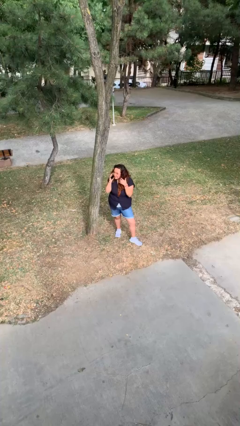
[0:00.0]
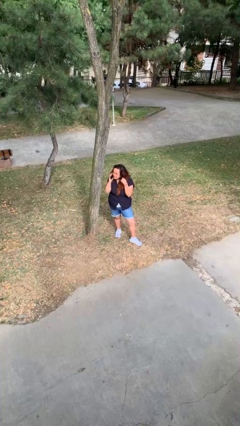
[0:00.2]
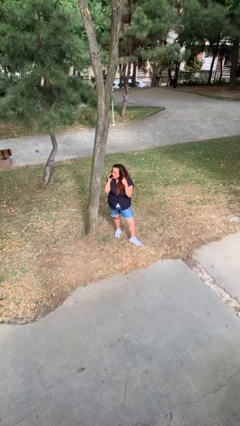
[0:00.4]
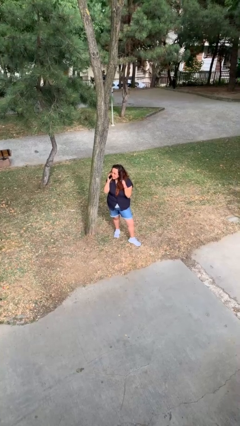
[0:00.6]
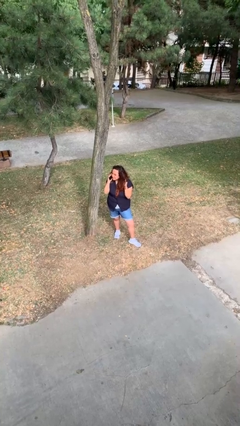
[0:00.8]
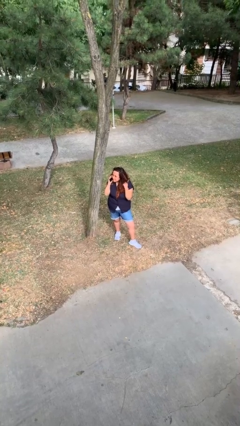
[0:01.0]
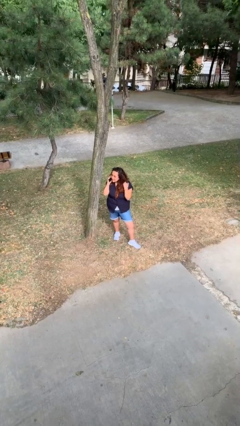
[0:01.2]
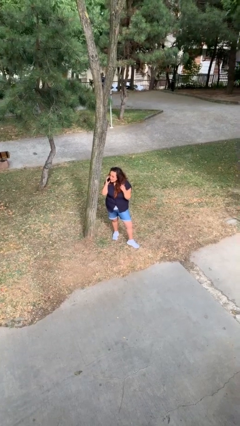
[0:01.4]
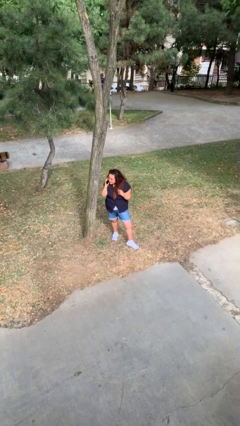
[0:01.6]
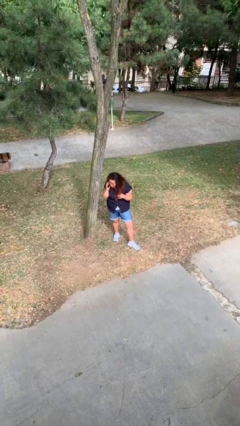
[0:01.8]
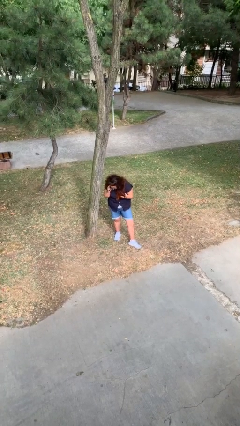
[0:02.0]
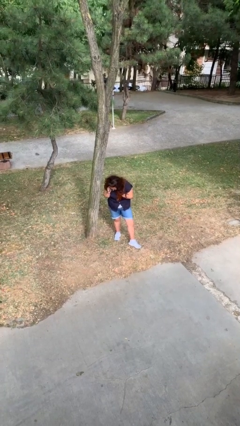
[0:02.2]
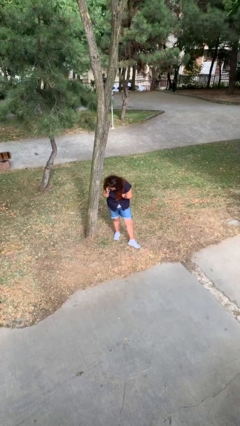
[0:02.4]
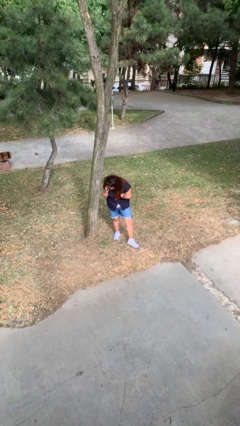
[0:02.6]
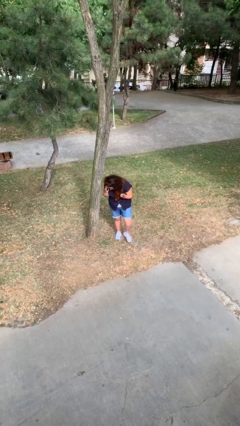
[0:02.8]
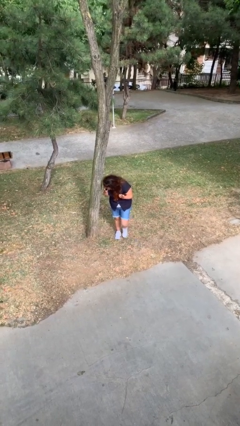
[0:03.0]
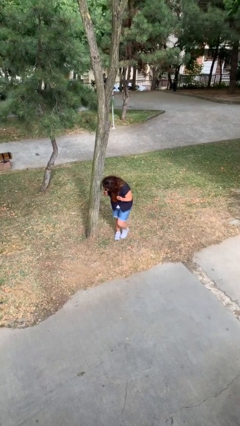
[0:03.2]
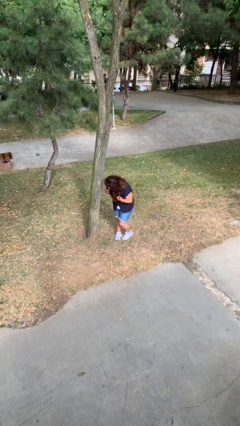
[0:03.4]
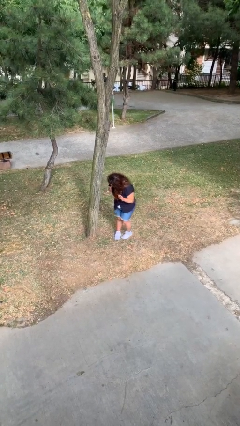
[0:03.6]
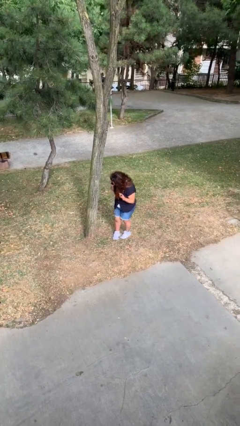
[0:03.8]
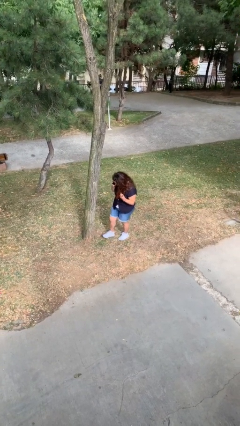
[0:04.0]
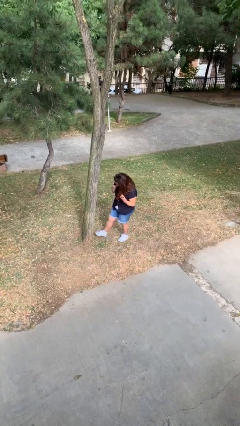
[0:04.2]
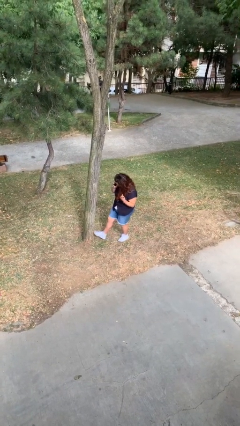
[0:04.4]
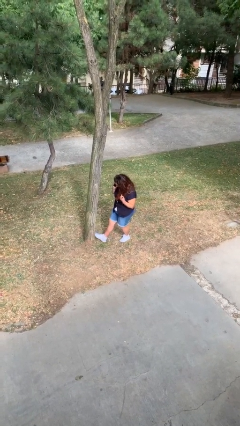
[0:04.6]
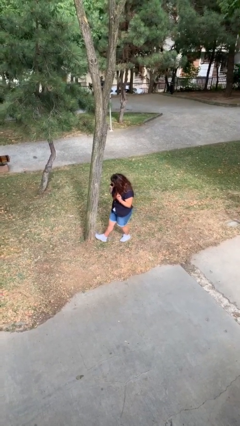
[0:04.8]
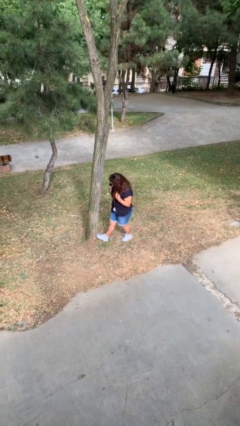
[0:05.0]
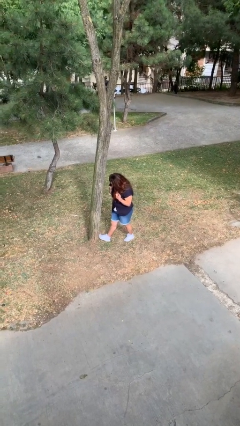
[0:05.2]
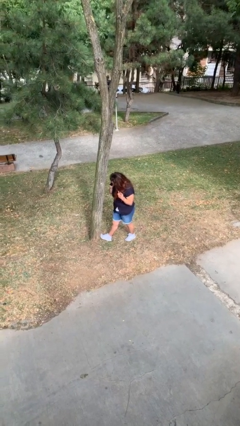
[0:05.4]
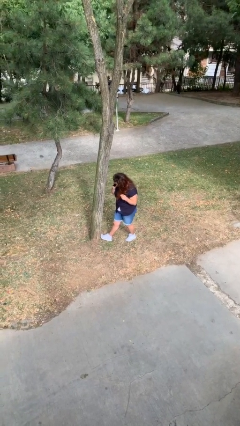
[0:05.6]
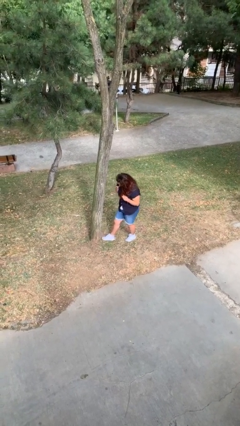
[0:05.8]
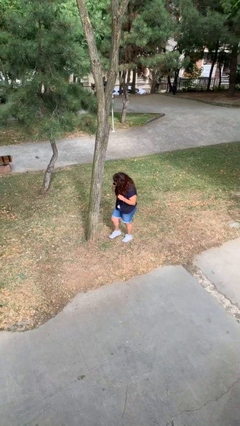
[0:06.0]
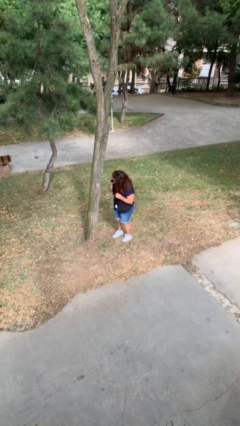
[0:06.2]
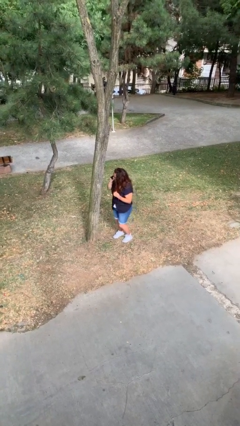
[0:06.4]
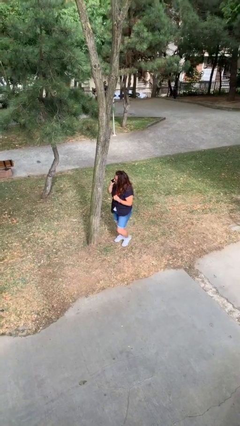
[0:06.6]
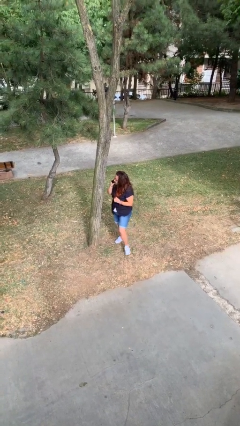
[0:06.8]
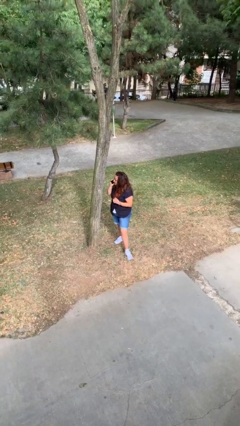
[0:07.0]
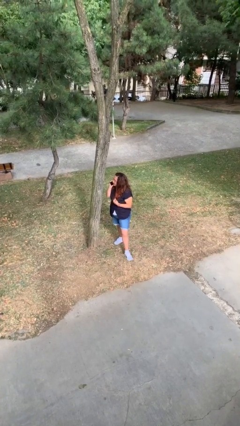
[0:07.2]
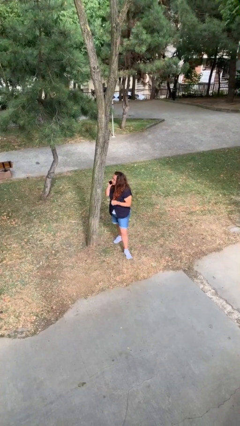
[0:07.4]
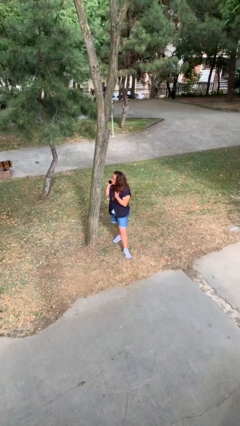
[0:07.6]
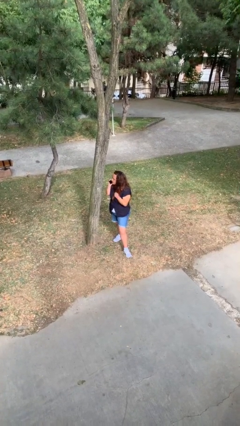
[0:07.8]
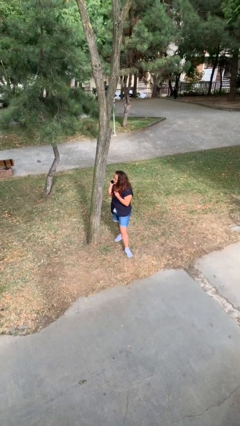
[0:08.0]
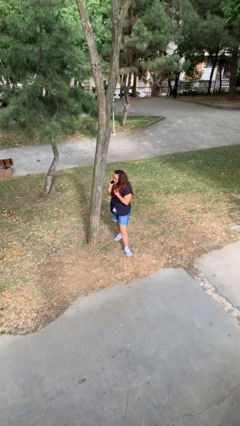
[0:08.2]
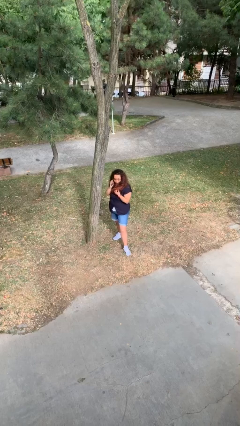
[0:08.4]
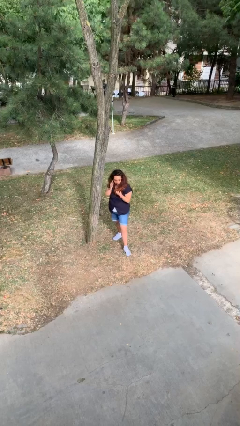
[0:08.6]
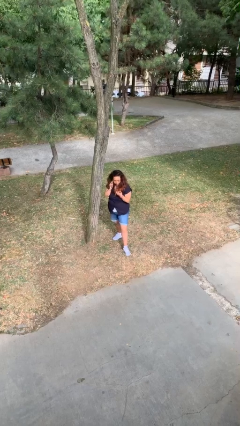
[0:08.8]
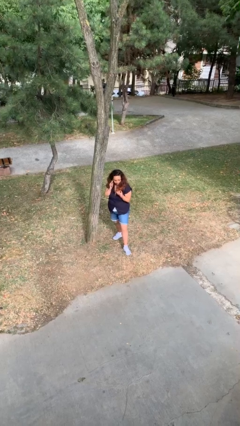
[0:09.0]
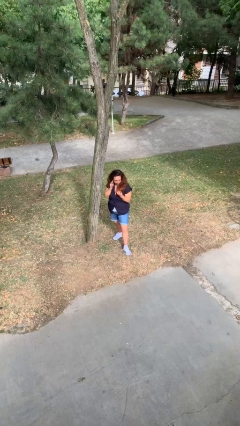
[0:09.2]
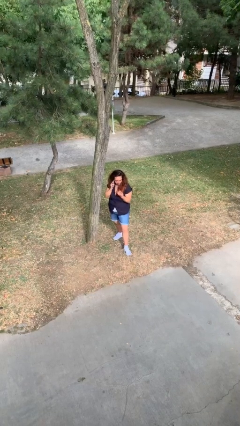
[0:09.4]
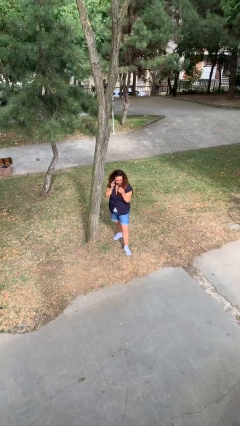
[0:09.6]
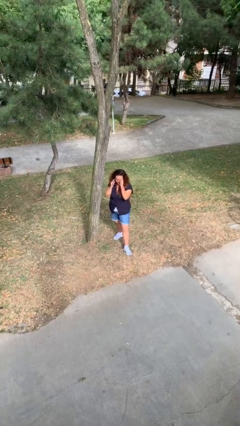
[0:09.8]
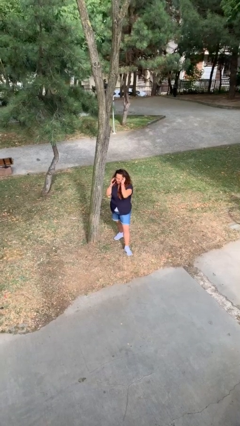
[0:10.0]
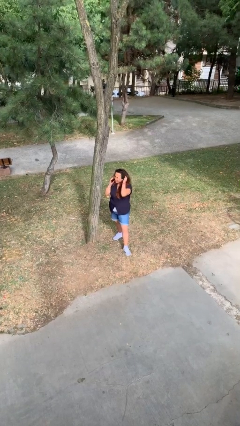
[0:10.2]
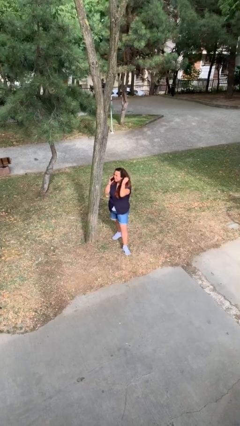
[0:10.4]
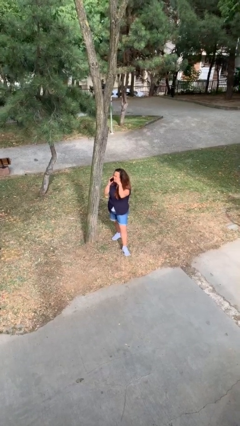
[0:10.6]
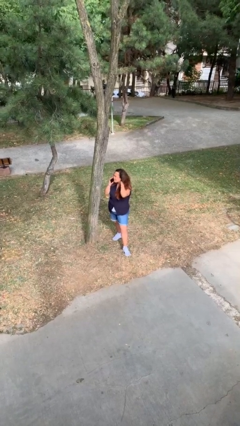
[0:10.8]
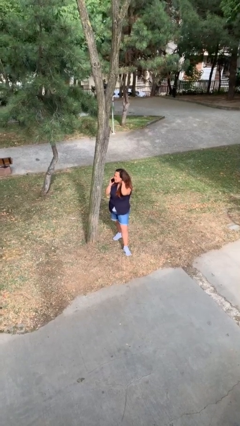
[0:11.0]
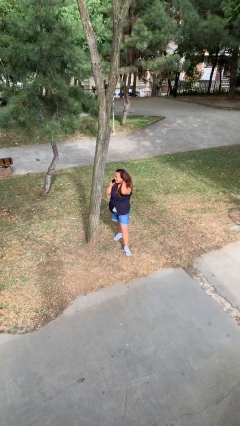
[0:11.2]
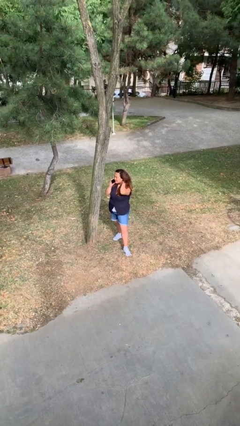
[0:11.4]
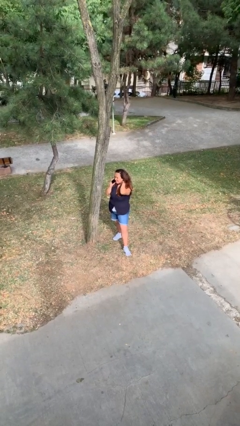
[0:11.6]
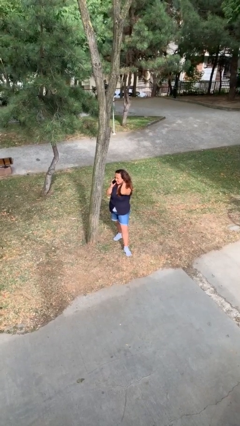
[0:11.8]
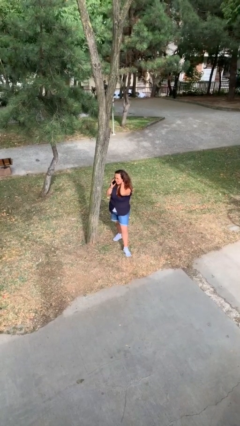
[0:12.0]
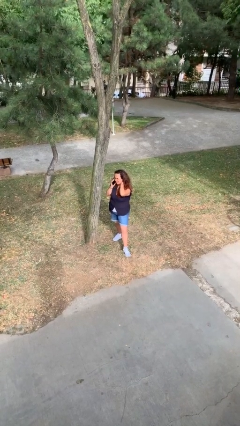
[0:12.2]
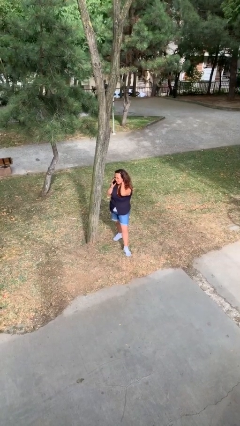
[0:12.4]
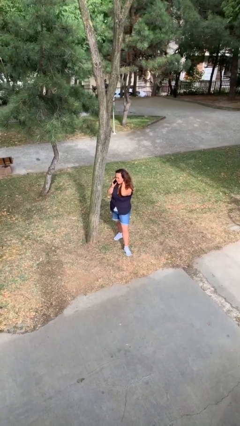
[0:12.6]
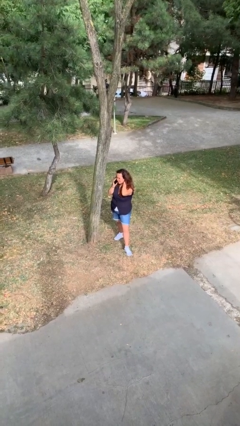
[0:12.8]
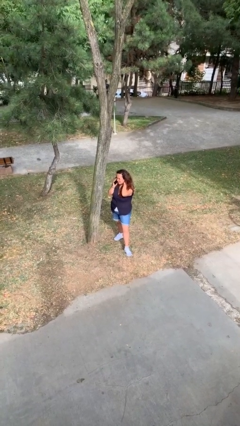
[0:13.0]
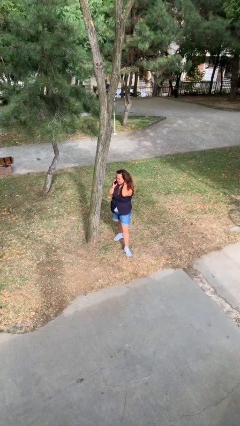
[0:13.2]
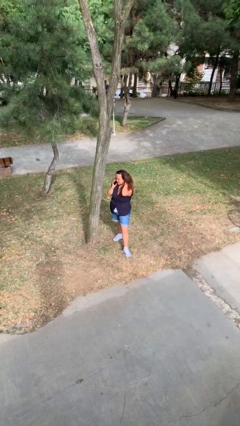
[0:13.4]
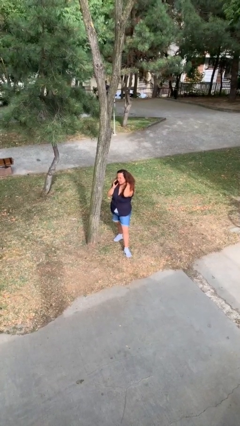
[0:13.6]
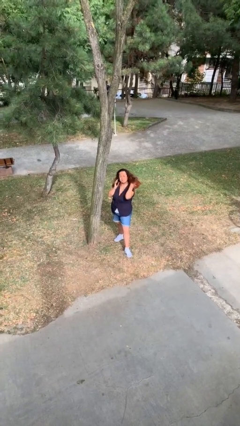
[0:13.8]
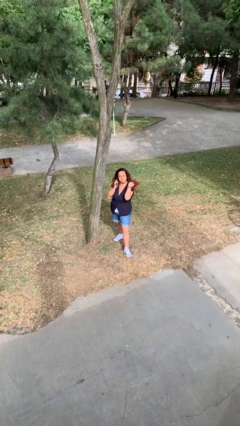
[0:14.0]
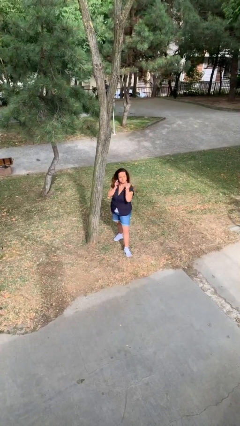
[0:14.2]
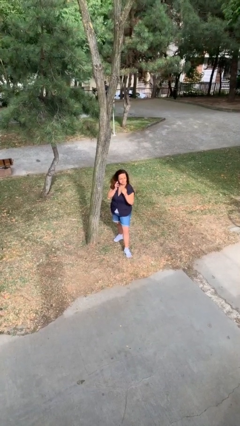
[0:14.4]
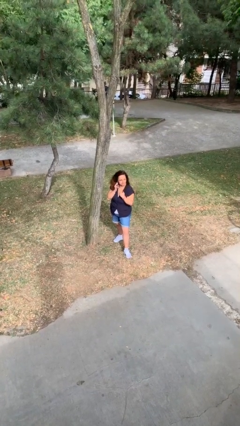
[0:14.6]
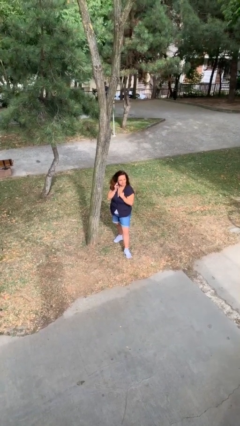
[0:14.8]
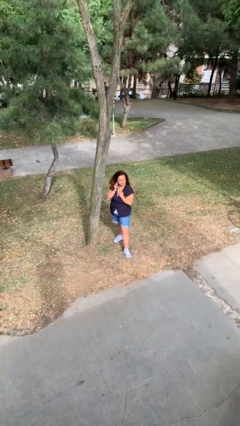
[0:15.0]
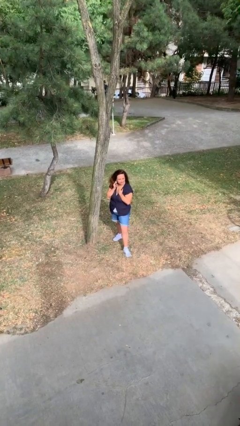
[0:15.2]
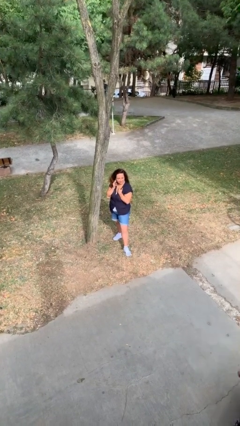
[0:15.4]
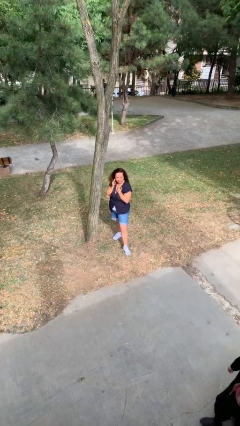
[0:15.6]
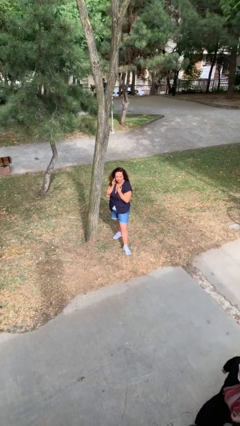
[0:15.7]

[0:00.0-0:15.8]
person talks on phone

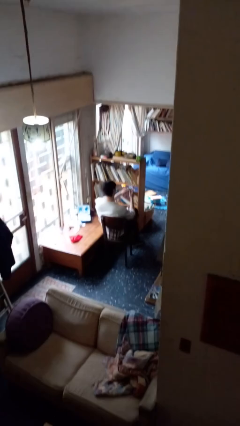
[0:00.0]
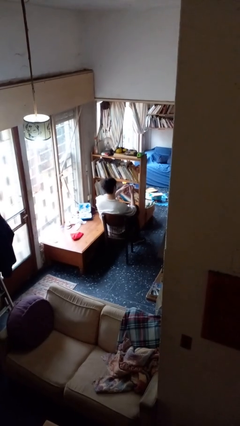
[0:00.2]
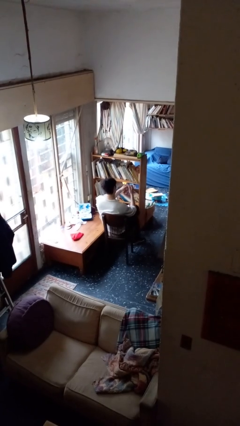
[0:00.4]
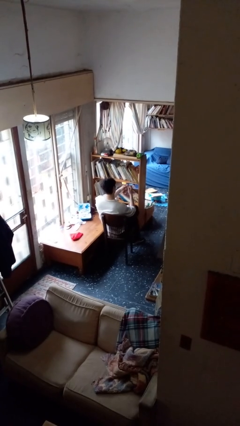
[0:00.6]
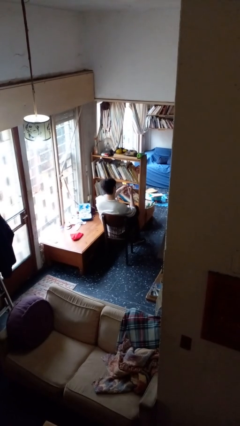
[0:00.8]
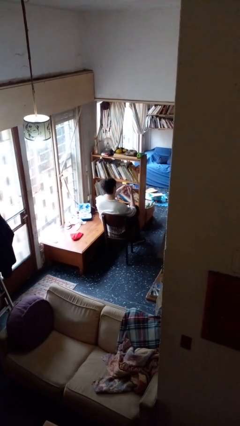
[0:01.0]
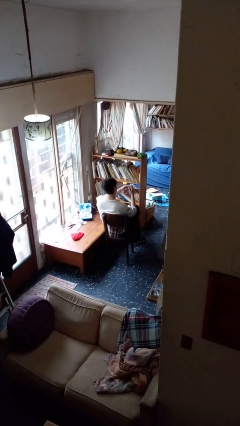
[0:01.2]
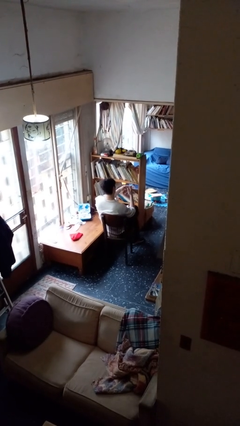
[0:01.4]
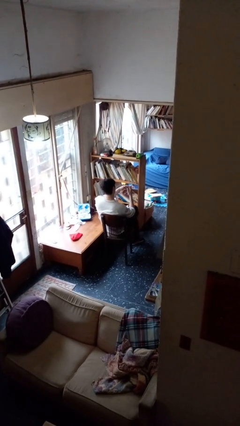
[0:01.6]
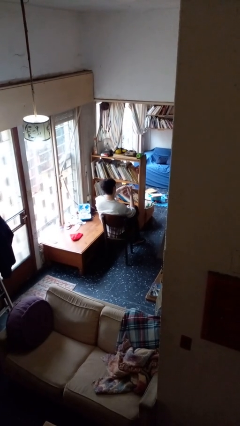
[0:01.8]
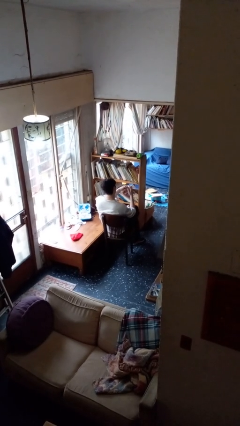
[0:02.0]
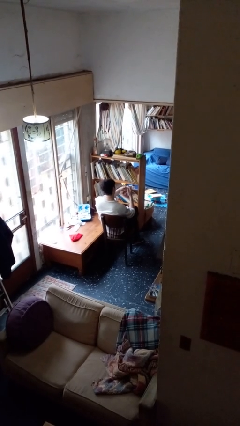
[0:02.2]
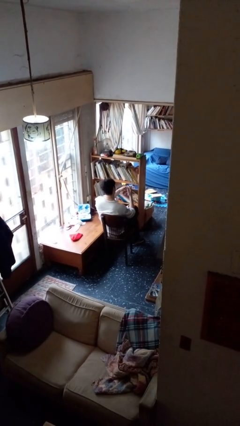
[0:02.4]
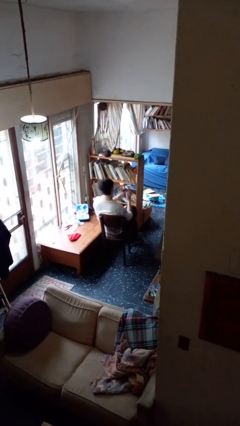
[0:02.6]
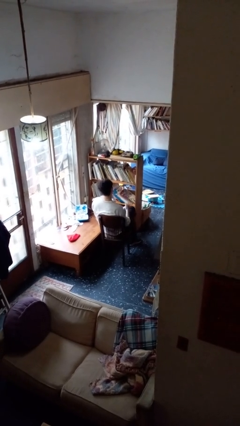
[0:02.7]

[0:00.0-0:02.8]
person files fingernails

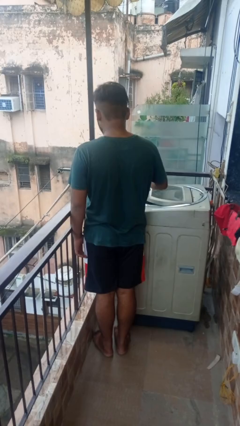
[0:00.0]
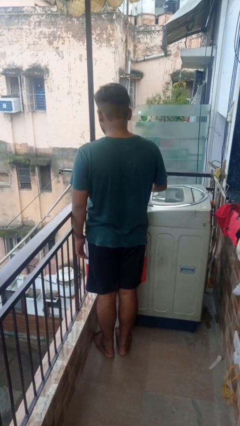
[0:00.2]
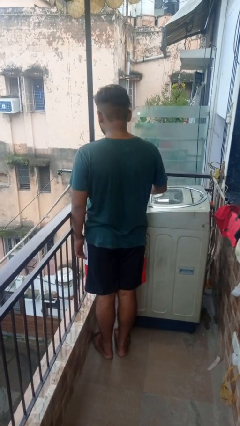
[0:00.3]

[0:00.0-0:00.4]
person closes clothes washer
